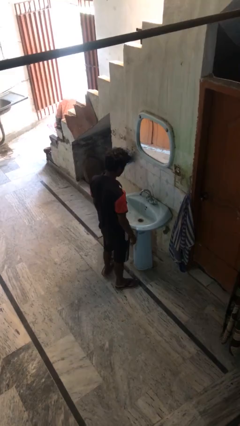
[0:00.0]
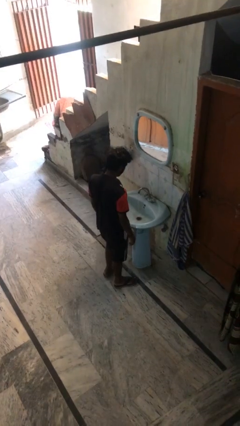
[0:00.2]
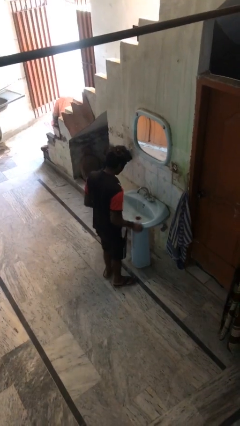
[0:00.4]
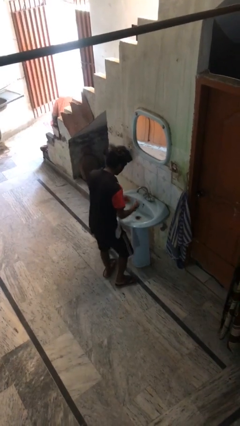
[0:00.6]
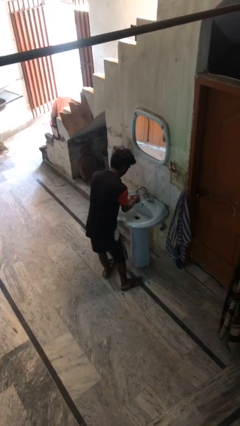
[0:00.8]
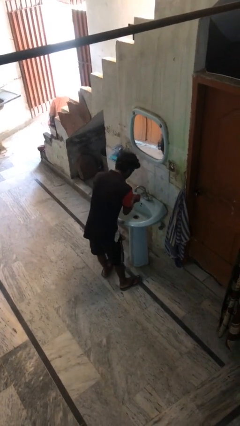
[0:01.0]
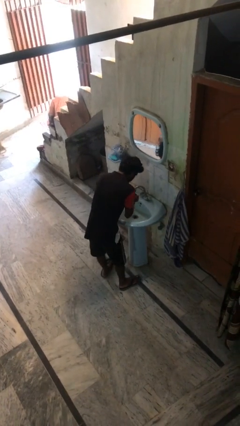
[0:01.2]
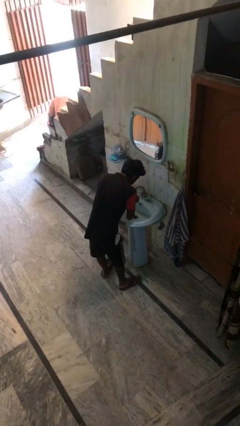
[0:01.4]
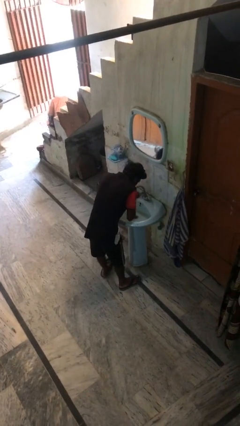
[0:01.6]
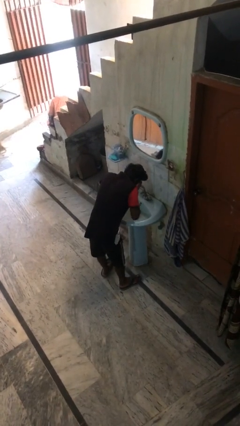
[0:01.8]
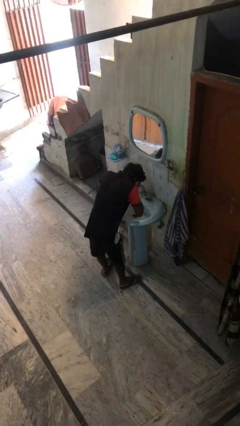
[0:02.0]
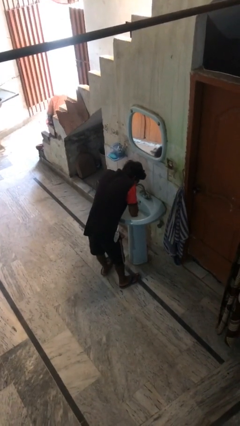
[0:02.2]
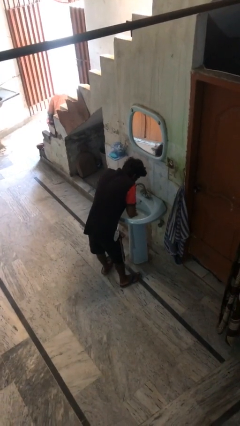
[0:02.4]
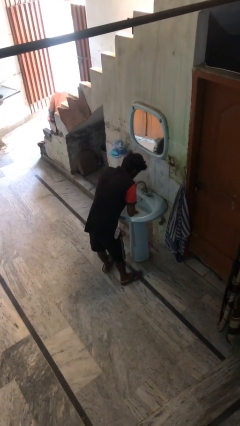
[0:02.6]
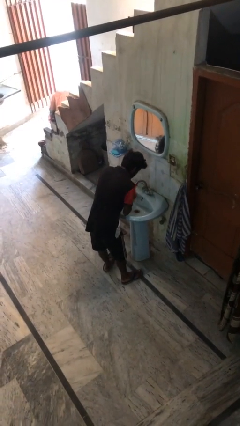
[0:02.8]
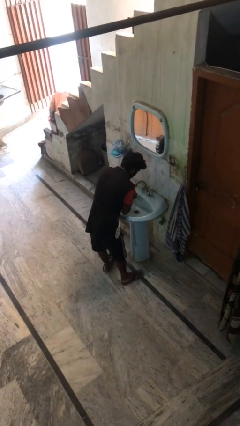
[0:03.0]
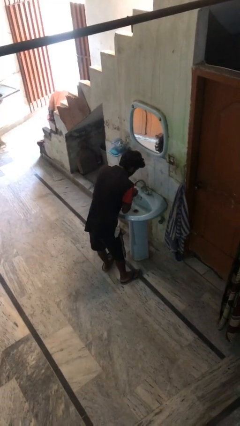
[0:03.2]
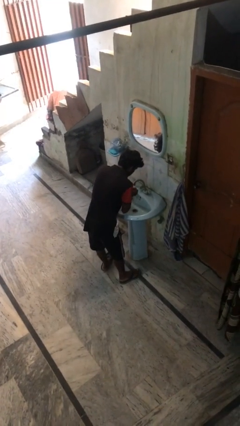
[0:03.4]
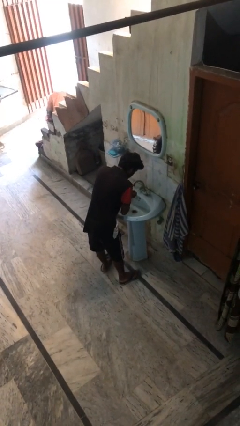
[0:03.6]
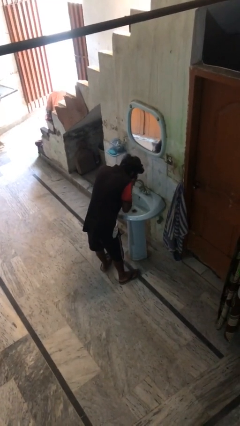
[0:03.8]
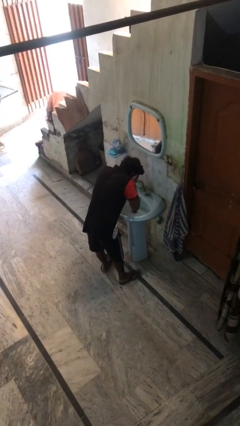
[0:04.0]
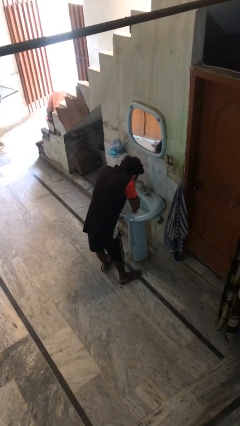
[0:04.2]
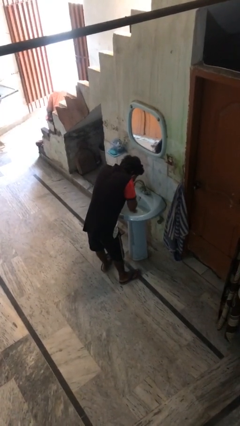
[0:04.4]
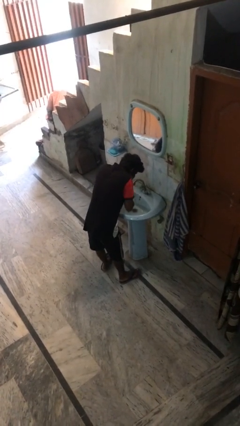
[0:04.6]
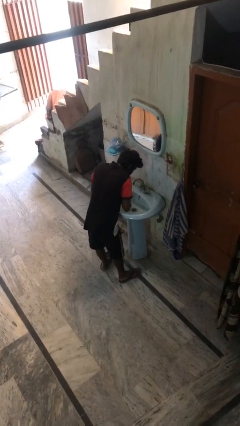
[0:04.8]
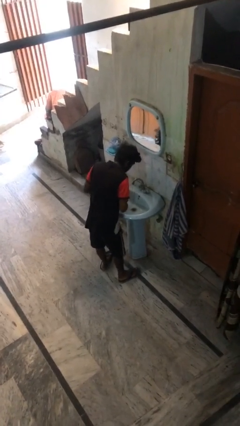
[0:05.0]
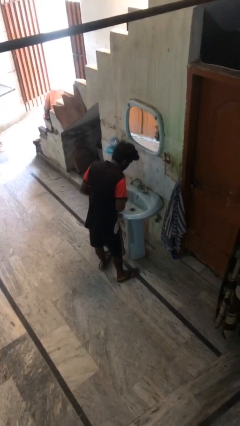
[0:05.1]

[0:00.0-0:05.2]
person washes face

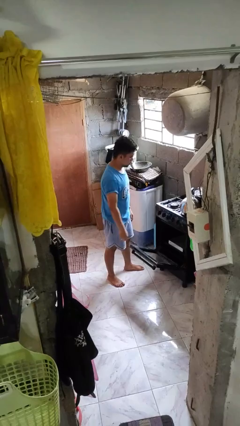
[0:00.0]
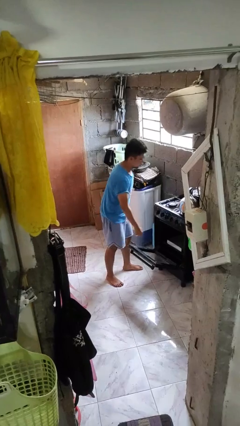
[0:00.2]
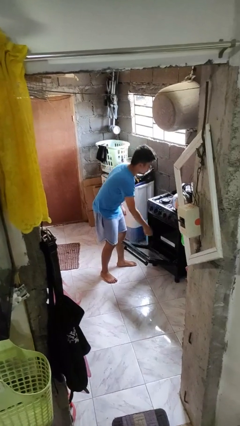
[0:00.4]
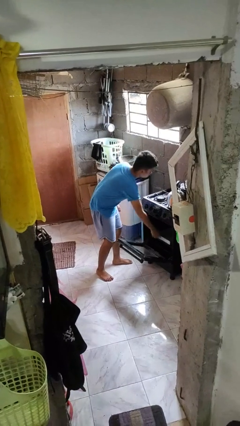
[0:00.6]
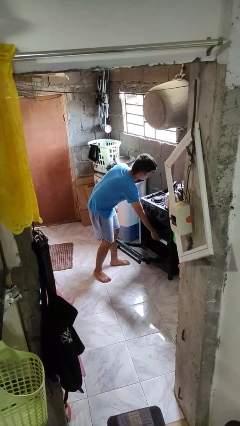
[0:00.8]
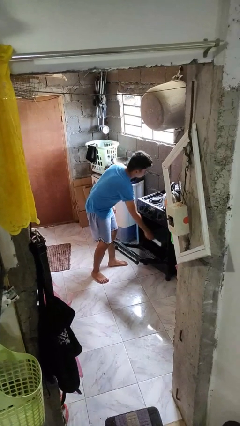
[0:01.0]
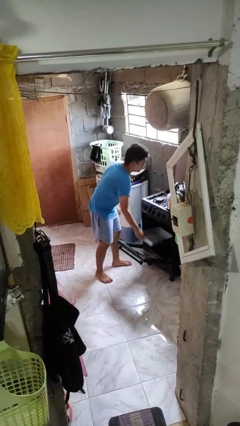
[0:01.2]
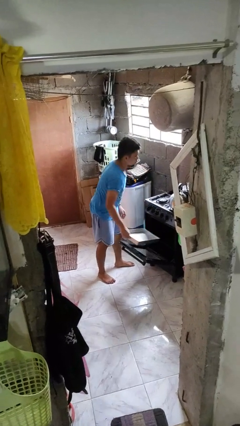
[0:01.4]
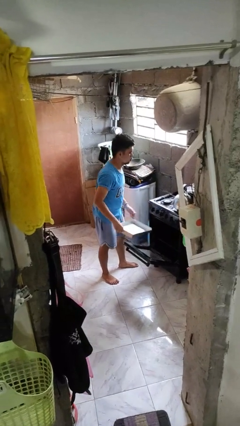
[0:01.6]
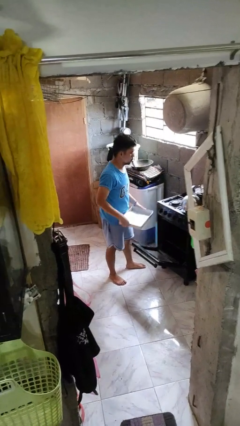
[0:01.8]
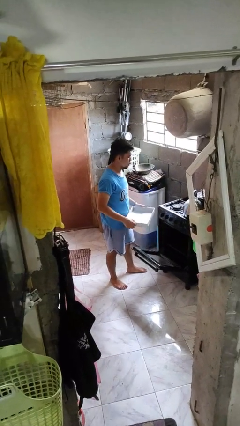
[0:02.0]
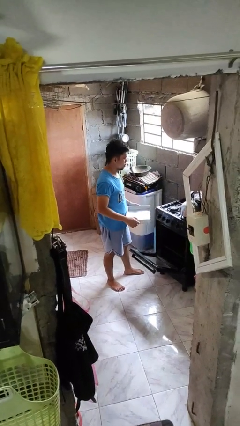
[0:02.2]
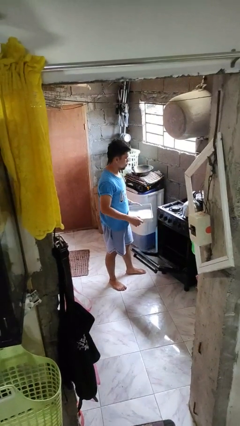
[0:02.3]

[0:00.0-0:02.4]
person takes object from oven

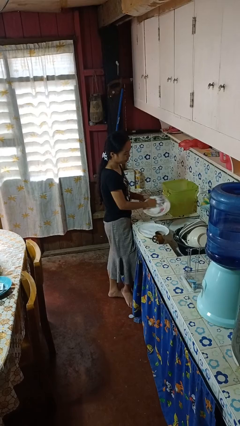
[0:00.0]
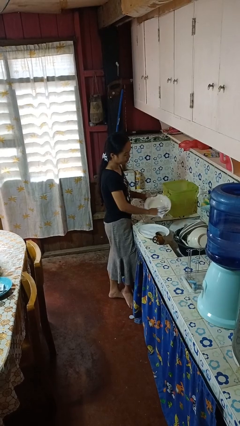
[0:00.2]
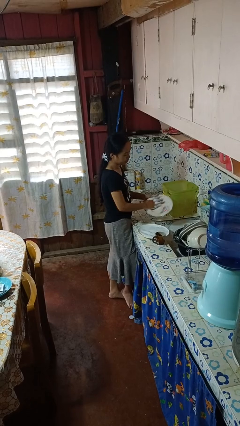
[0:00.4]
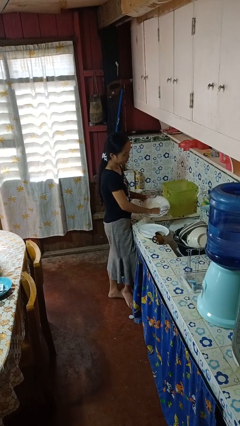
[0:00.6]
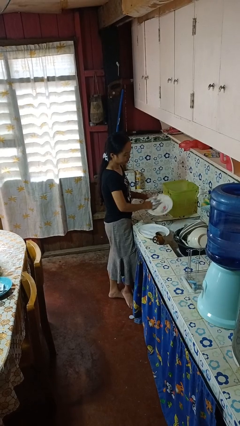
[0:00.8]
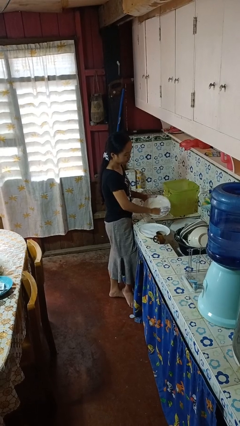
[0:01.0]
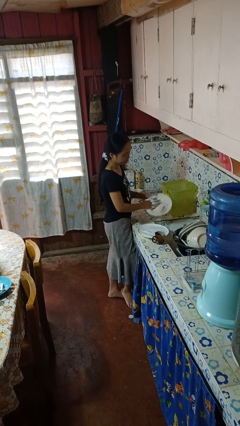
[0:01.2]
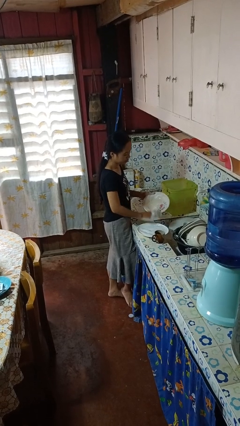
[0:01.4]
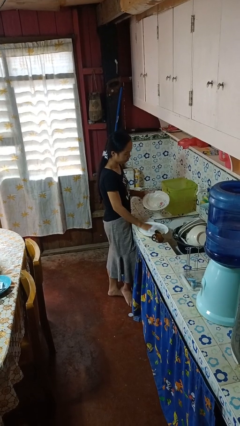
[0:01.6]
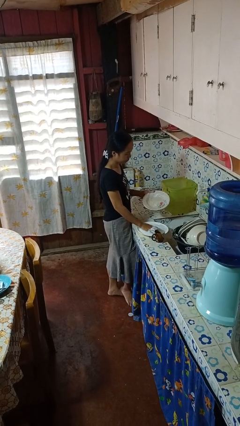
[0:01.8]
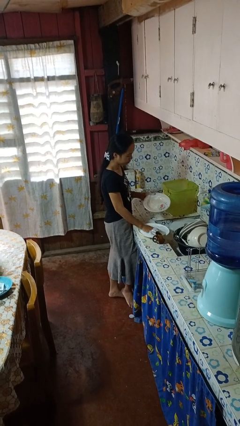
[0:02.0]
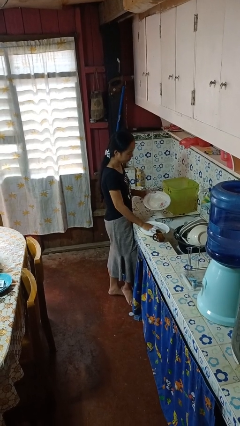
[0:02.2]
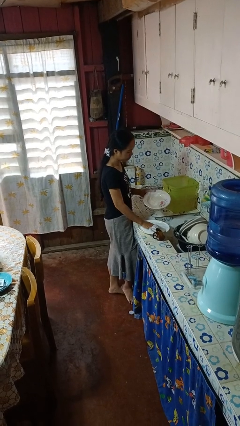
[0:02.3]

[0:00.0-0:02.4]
person washes dish

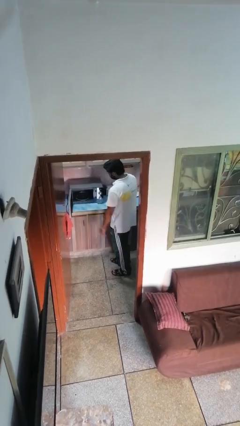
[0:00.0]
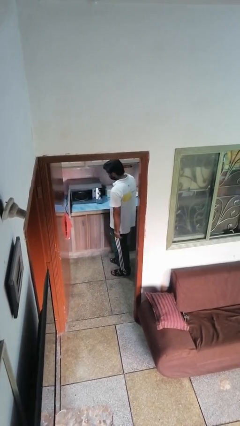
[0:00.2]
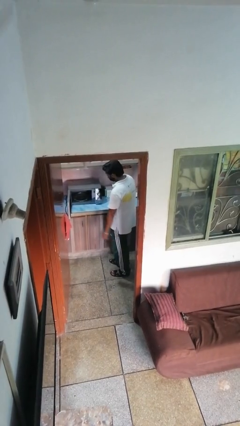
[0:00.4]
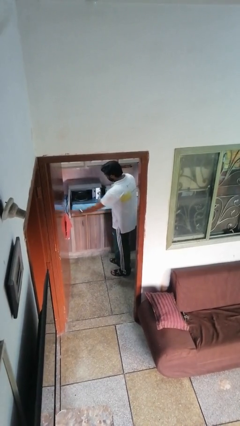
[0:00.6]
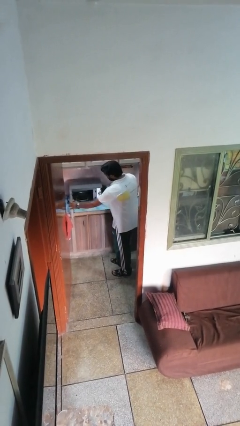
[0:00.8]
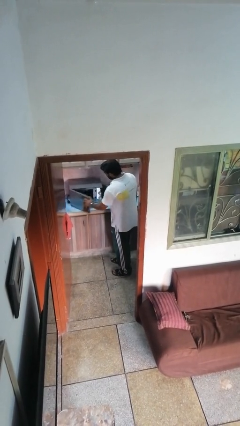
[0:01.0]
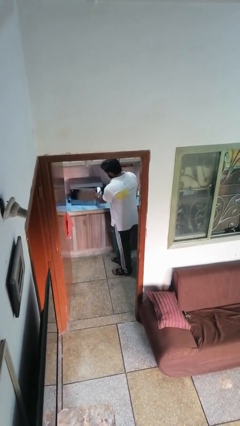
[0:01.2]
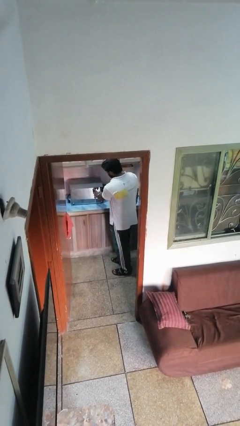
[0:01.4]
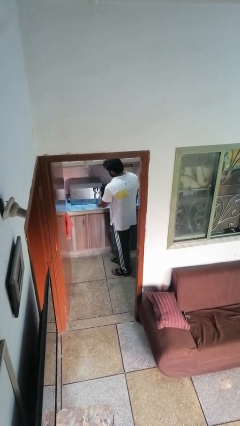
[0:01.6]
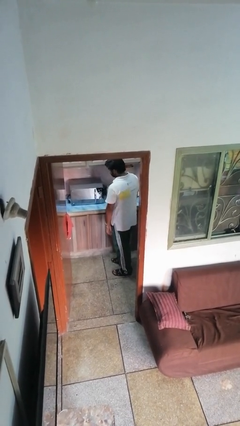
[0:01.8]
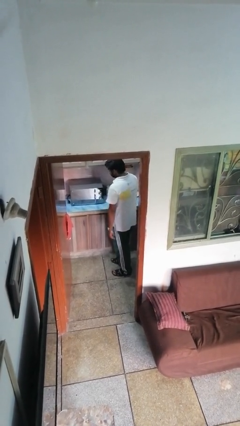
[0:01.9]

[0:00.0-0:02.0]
person closes microwave

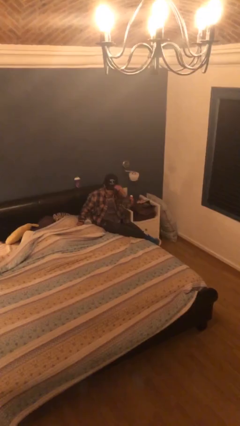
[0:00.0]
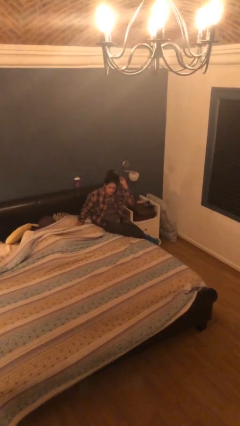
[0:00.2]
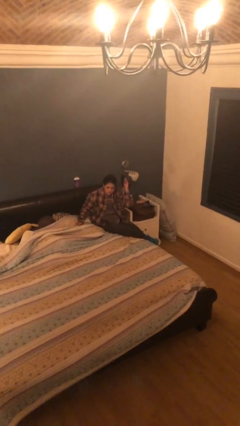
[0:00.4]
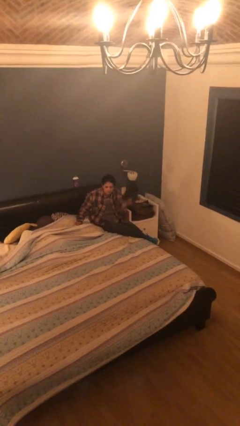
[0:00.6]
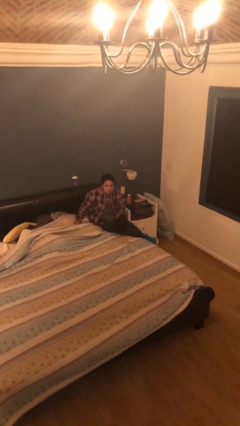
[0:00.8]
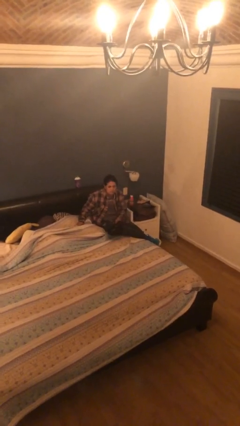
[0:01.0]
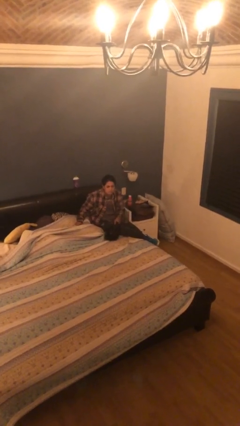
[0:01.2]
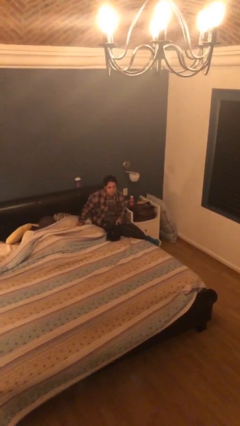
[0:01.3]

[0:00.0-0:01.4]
person takes off hat

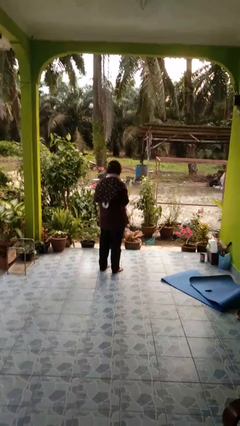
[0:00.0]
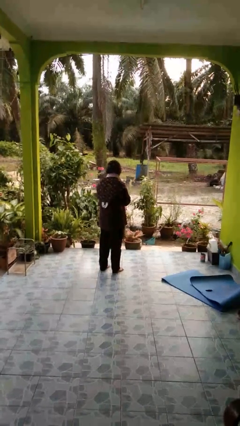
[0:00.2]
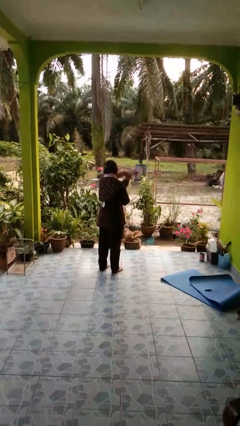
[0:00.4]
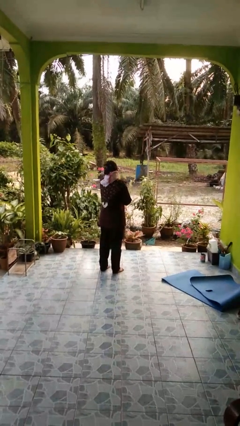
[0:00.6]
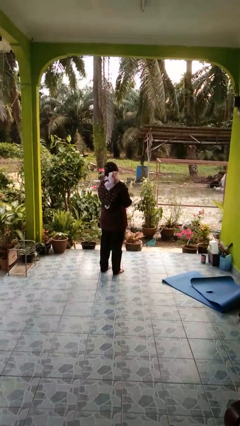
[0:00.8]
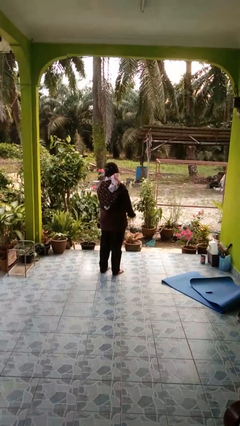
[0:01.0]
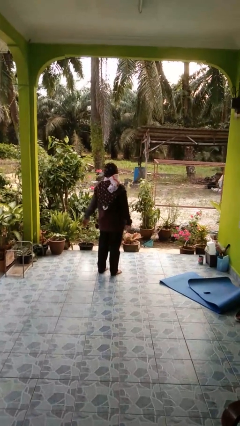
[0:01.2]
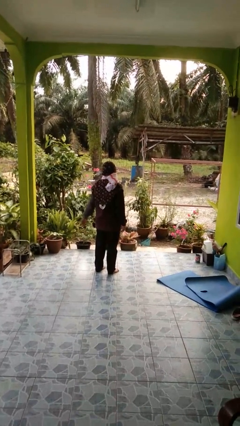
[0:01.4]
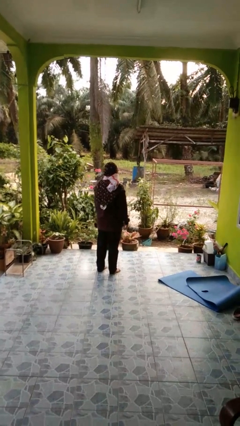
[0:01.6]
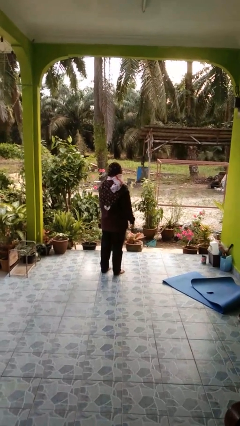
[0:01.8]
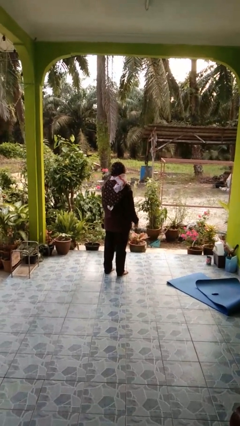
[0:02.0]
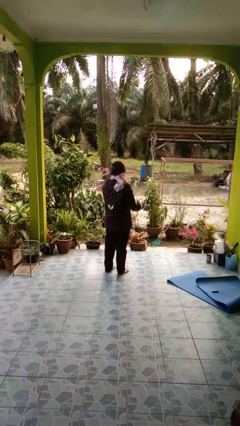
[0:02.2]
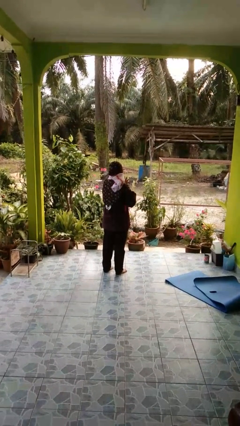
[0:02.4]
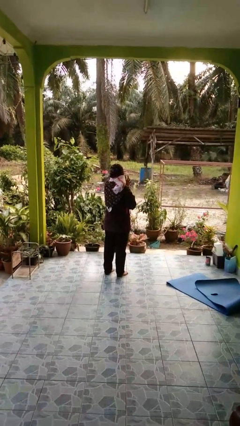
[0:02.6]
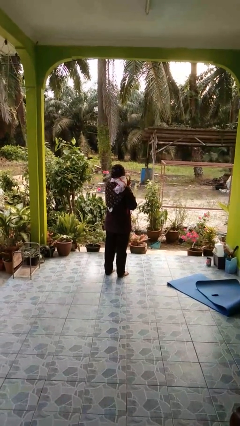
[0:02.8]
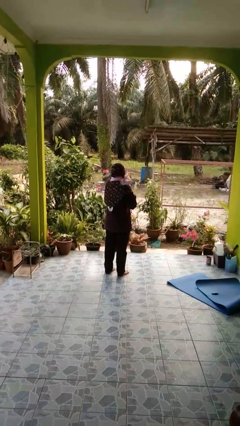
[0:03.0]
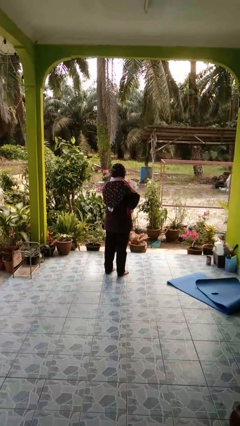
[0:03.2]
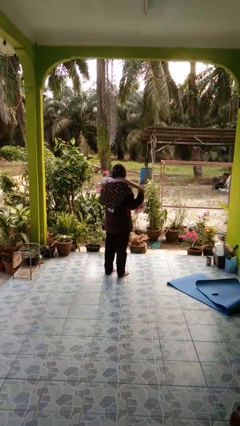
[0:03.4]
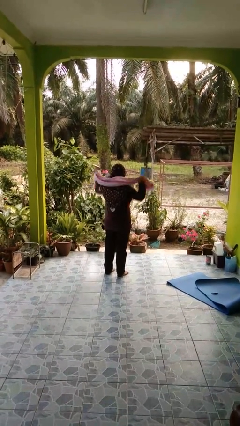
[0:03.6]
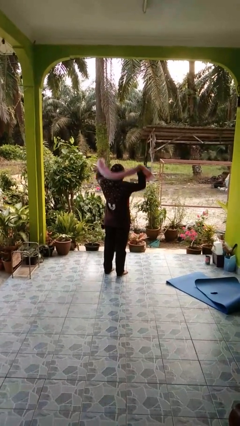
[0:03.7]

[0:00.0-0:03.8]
person puts on scarf
